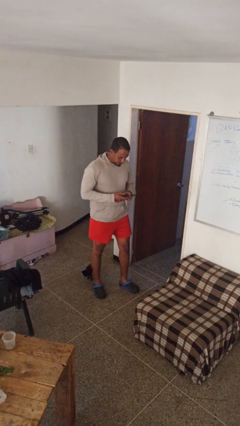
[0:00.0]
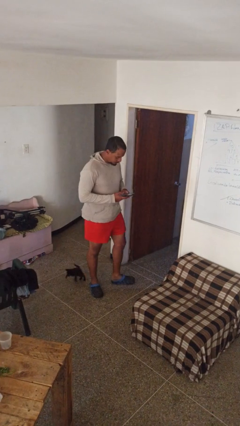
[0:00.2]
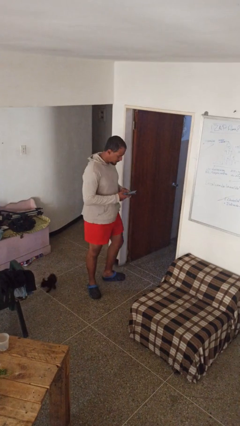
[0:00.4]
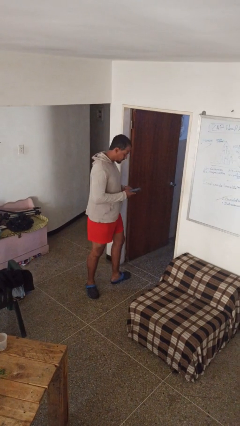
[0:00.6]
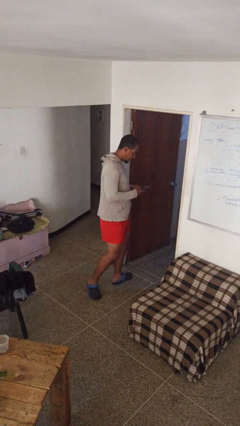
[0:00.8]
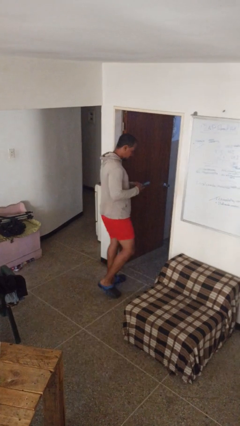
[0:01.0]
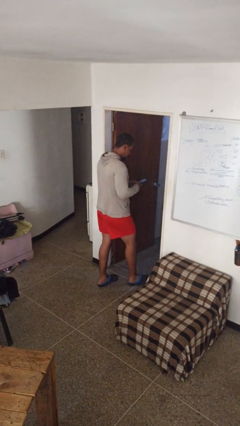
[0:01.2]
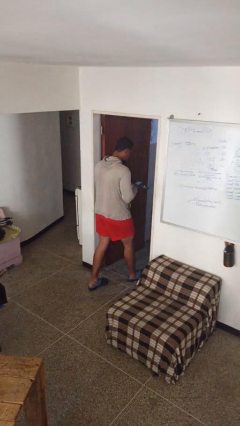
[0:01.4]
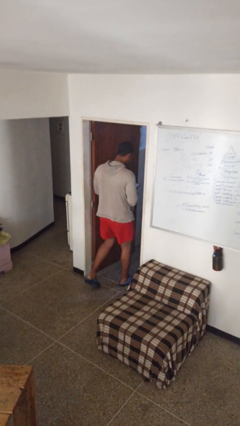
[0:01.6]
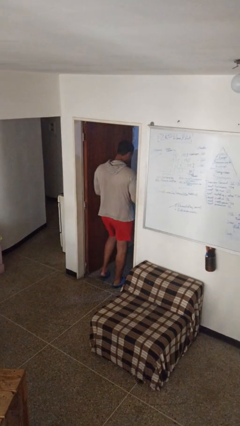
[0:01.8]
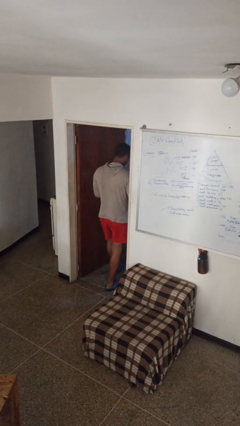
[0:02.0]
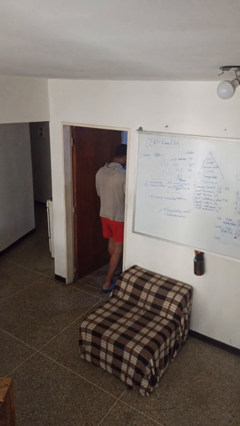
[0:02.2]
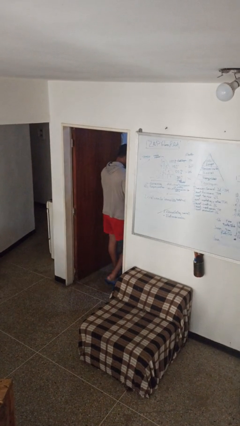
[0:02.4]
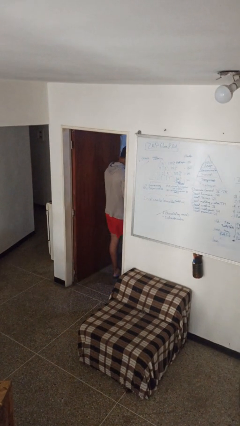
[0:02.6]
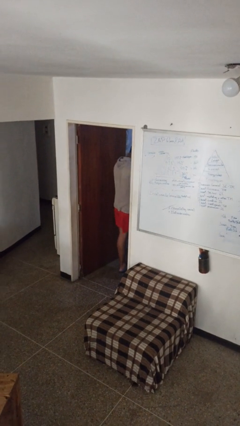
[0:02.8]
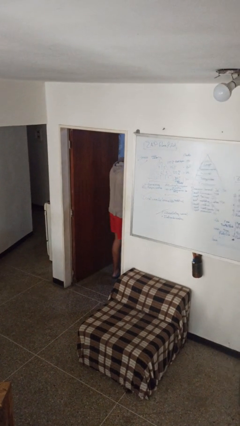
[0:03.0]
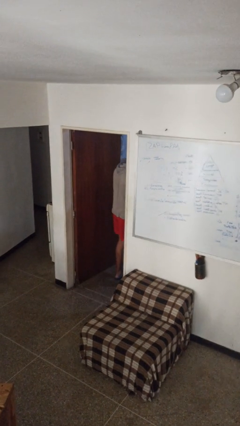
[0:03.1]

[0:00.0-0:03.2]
person exits scene through structure

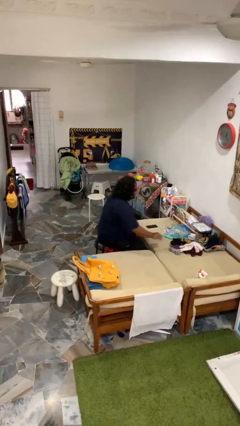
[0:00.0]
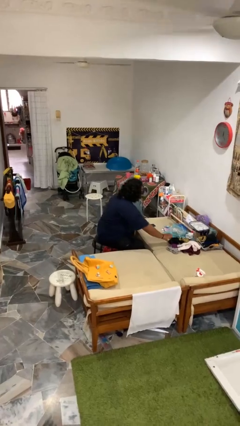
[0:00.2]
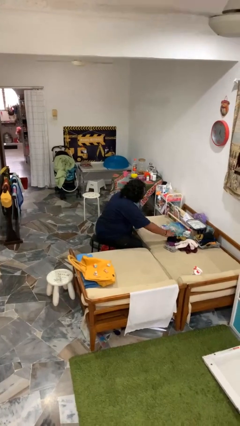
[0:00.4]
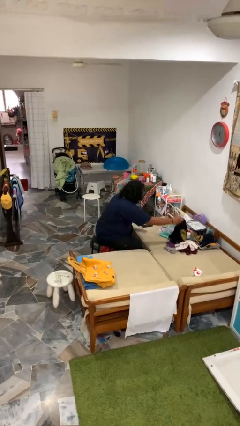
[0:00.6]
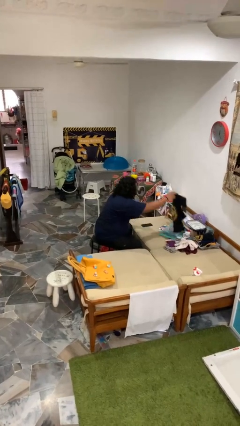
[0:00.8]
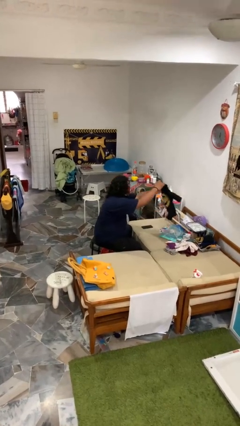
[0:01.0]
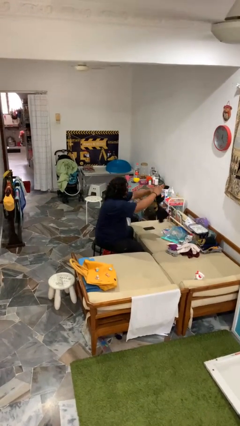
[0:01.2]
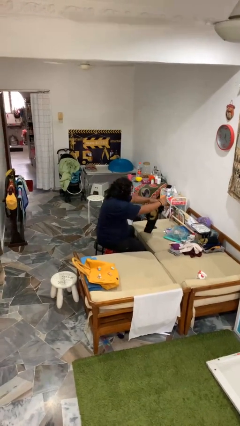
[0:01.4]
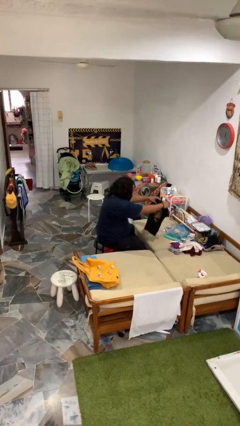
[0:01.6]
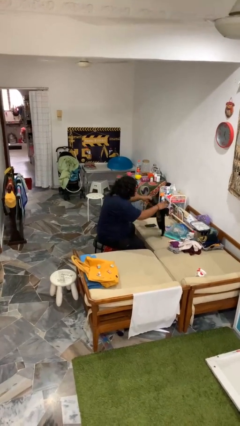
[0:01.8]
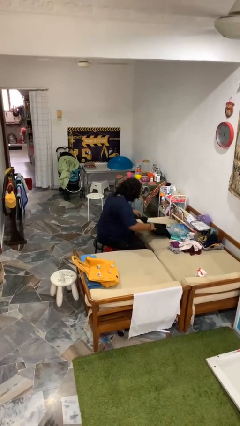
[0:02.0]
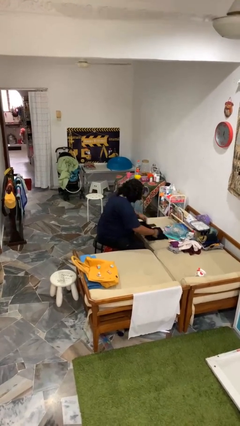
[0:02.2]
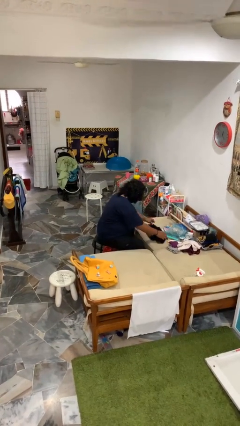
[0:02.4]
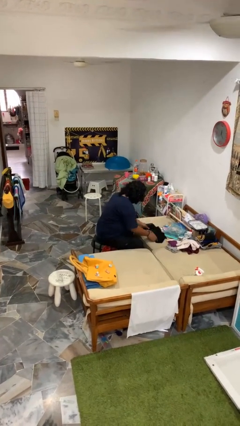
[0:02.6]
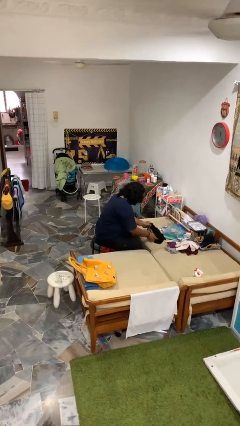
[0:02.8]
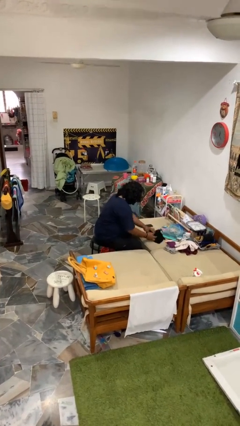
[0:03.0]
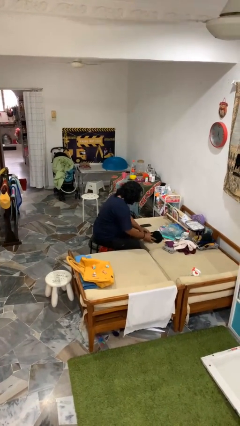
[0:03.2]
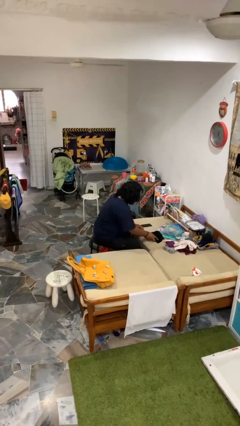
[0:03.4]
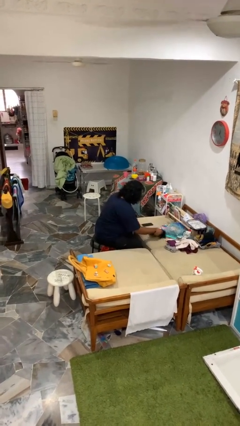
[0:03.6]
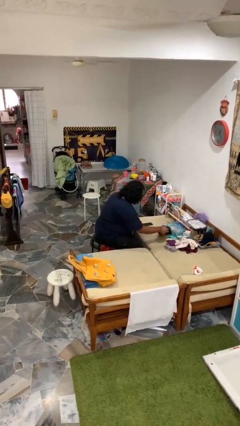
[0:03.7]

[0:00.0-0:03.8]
person folds shirt

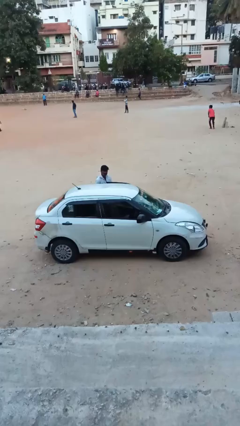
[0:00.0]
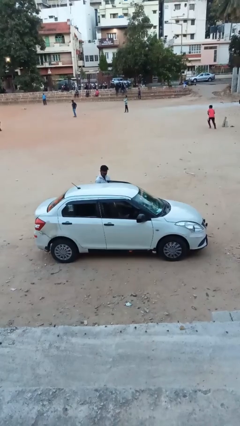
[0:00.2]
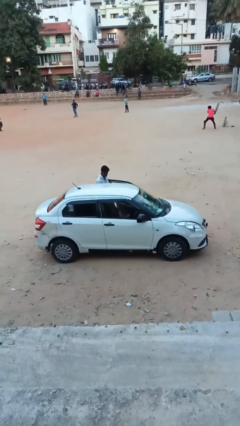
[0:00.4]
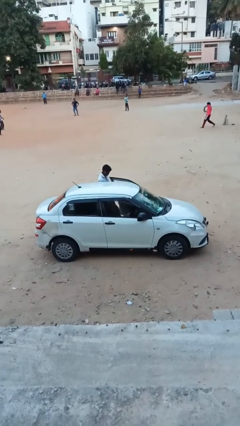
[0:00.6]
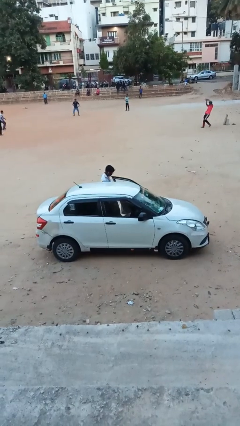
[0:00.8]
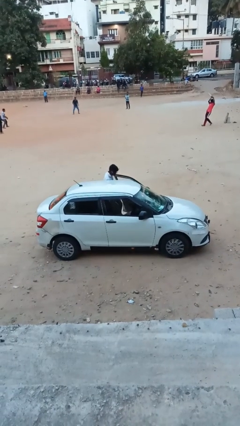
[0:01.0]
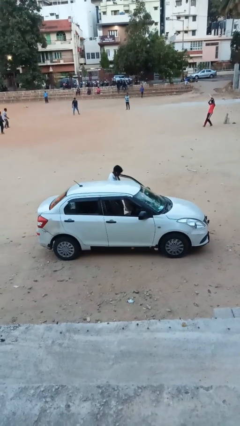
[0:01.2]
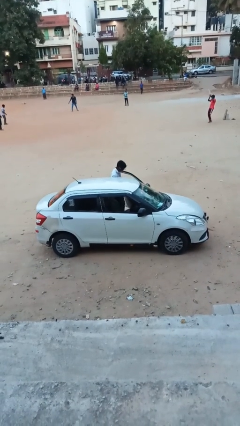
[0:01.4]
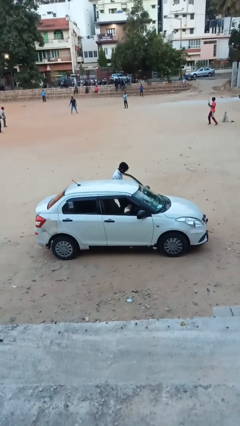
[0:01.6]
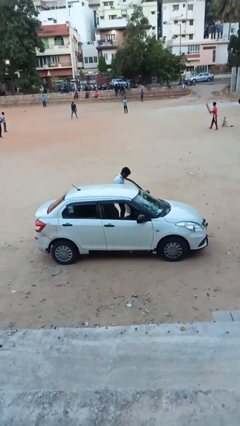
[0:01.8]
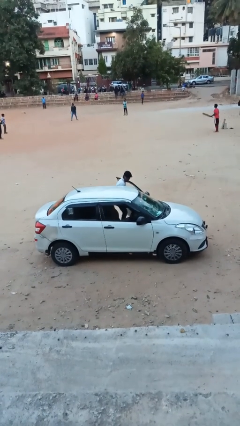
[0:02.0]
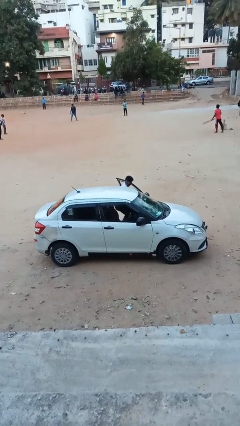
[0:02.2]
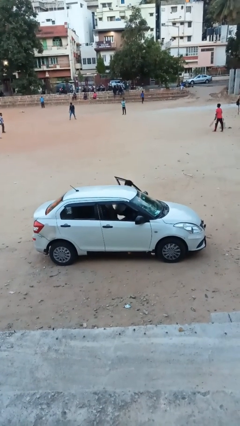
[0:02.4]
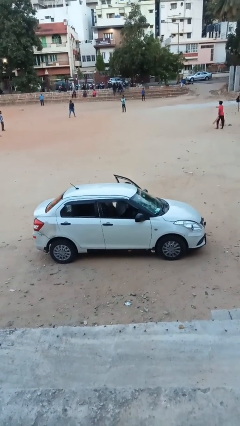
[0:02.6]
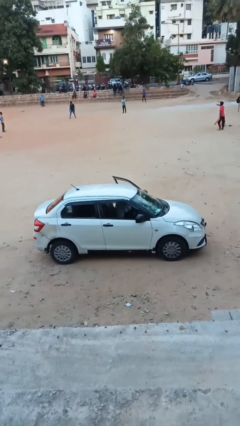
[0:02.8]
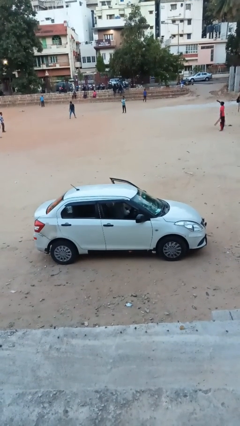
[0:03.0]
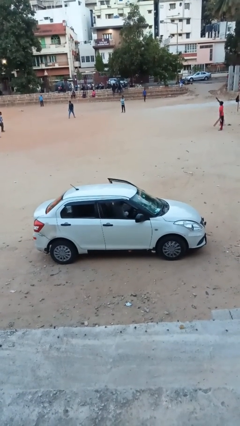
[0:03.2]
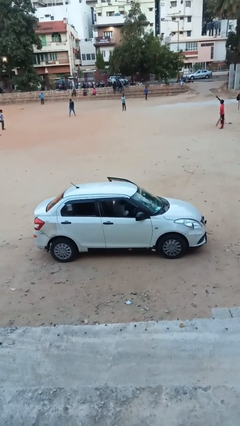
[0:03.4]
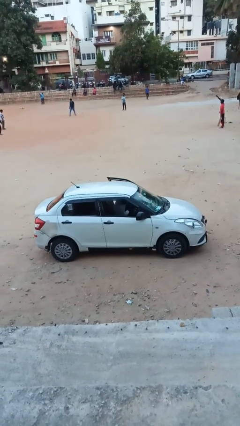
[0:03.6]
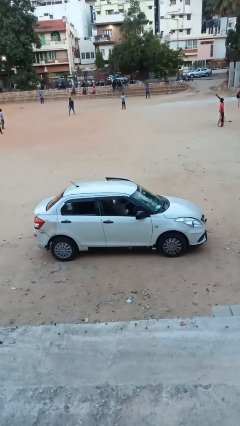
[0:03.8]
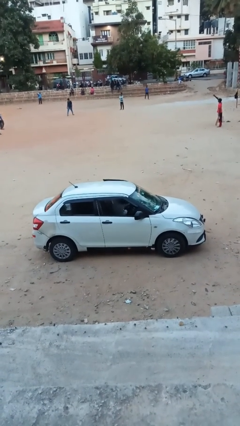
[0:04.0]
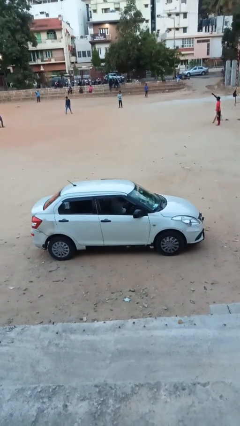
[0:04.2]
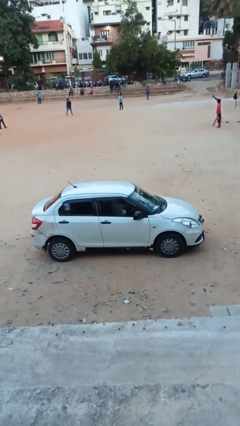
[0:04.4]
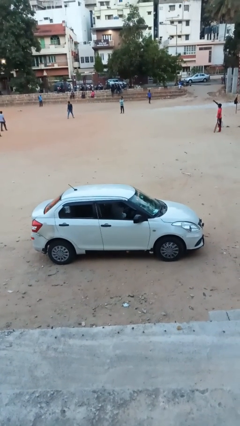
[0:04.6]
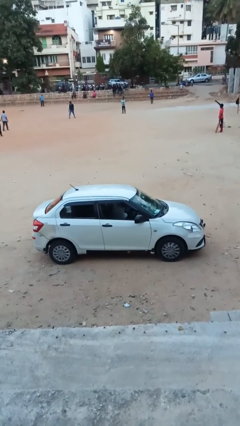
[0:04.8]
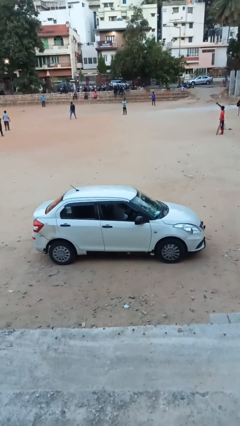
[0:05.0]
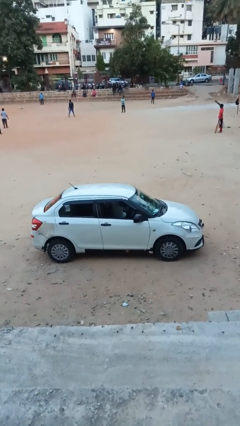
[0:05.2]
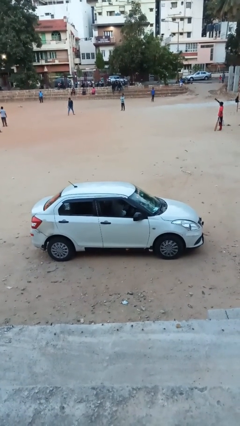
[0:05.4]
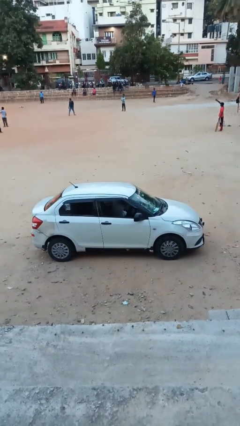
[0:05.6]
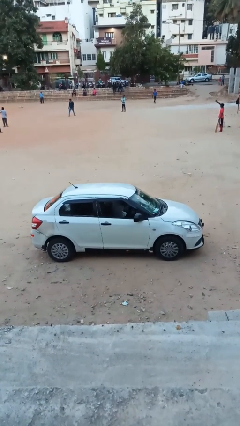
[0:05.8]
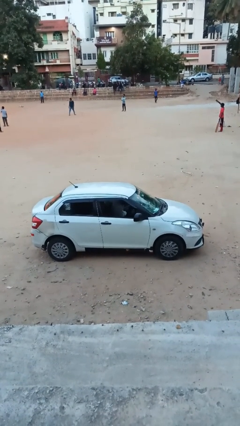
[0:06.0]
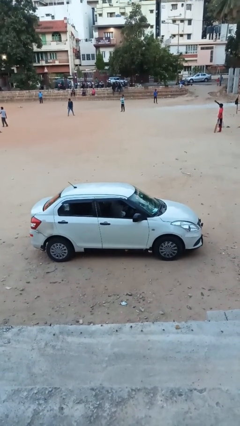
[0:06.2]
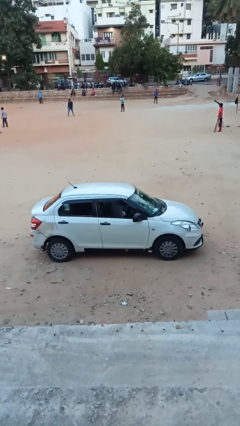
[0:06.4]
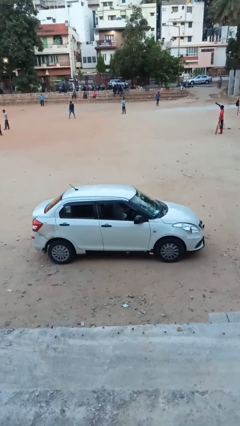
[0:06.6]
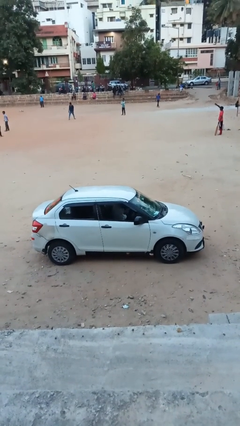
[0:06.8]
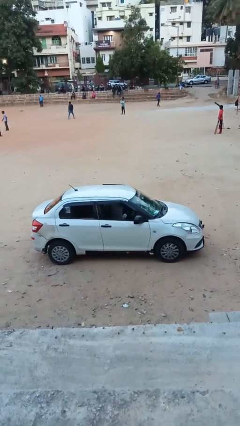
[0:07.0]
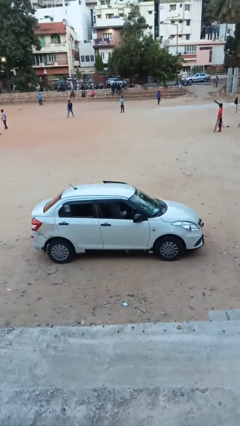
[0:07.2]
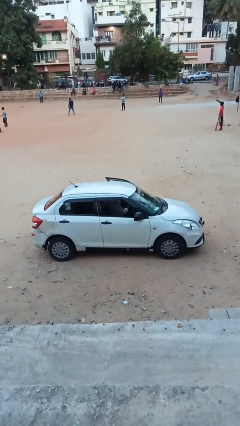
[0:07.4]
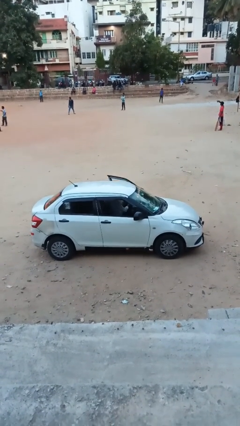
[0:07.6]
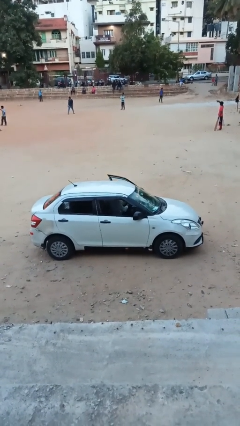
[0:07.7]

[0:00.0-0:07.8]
car picks up person

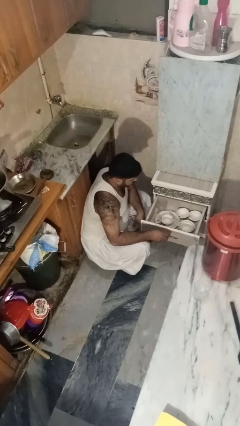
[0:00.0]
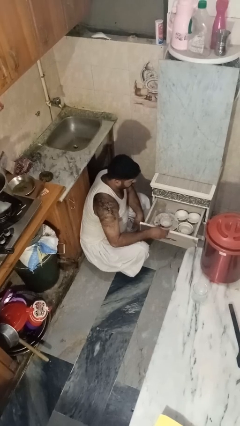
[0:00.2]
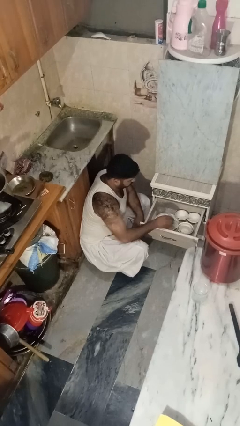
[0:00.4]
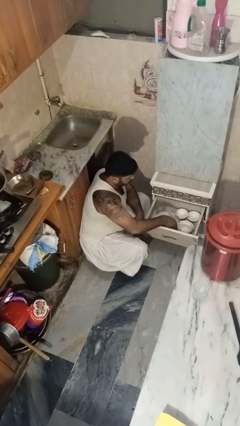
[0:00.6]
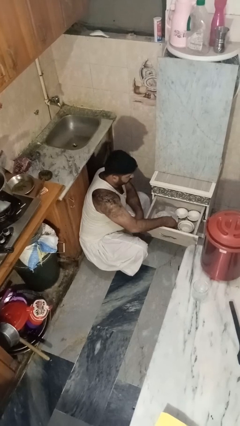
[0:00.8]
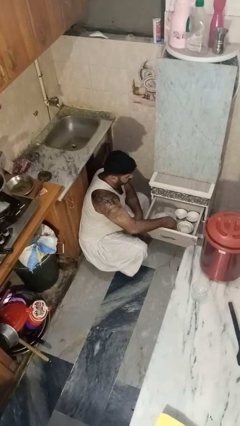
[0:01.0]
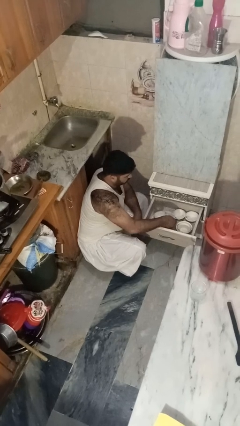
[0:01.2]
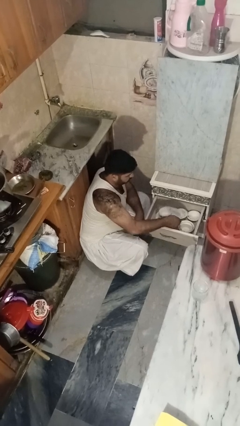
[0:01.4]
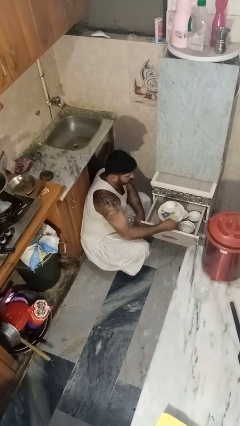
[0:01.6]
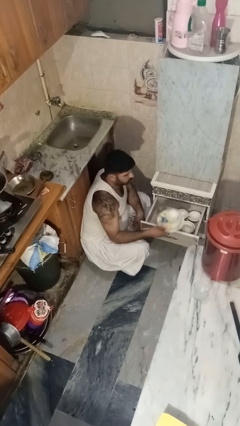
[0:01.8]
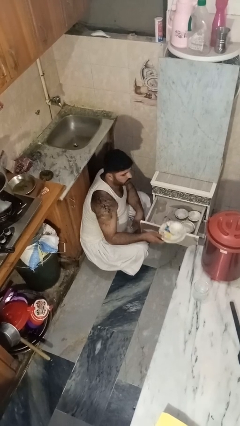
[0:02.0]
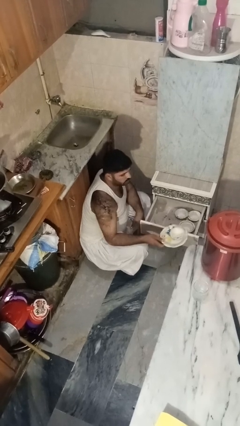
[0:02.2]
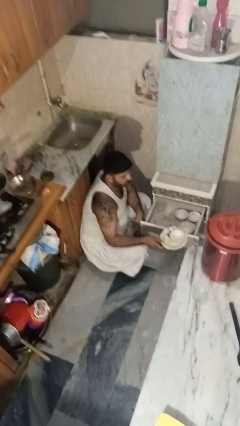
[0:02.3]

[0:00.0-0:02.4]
person takes object from kitchen drawer
